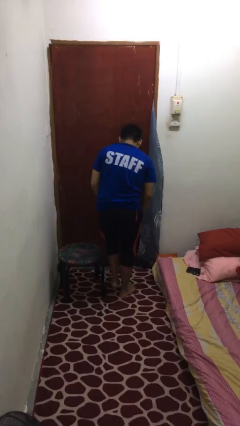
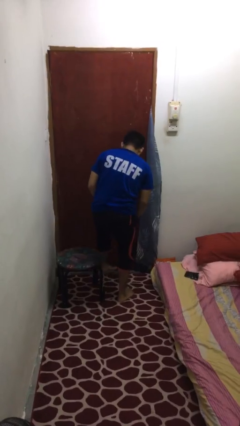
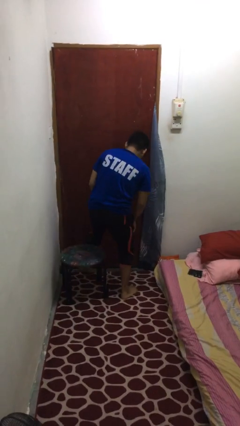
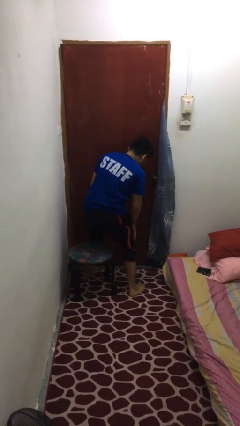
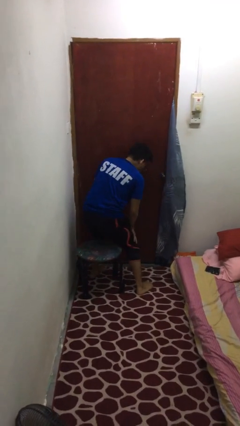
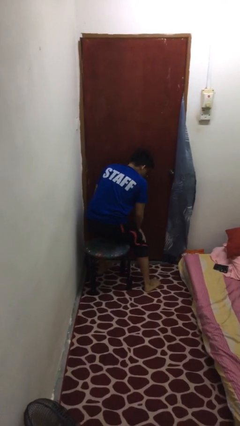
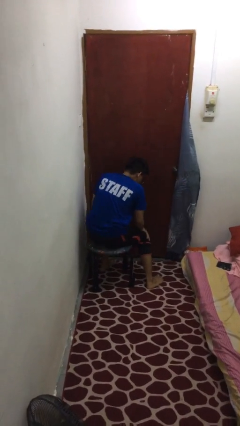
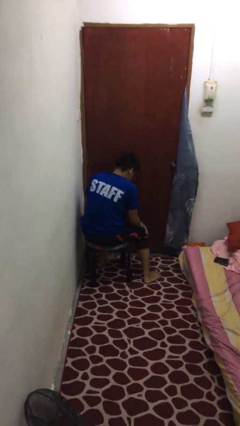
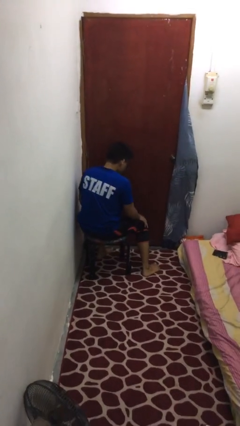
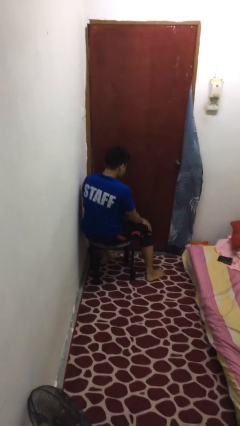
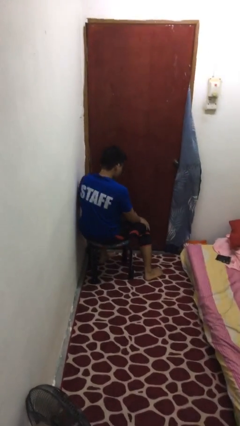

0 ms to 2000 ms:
person sits down

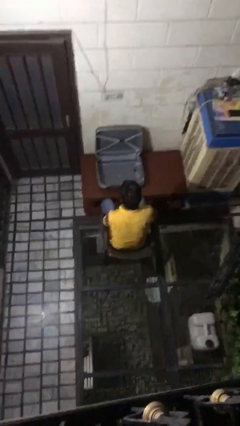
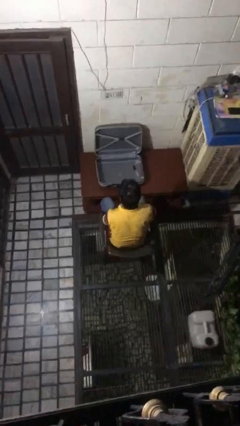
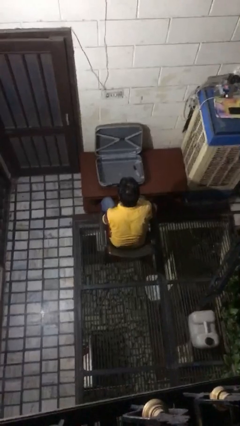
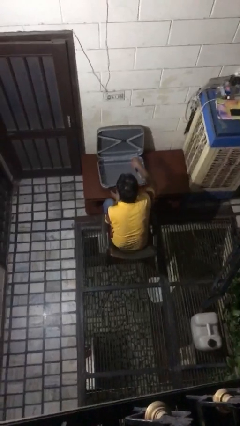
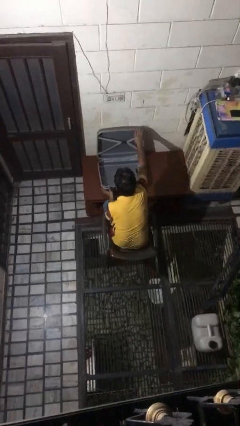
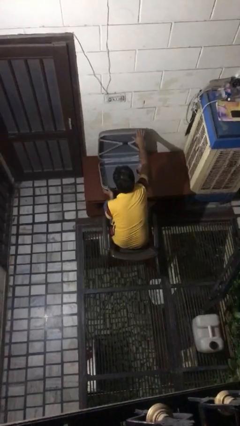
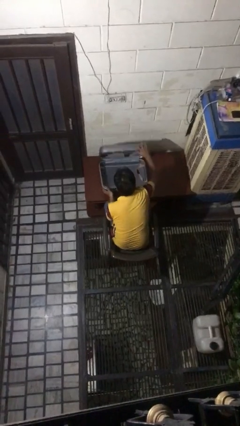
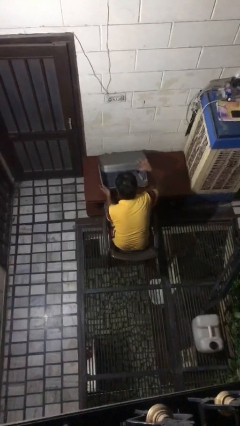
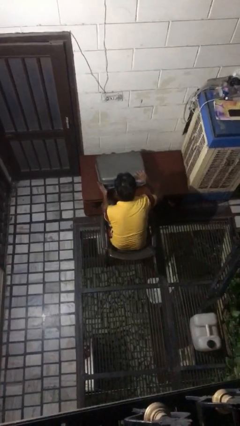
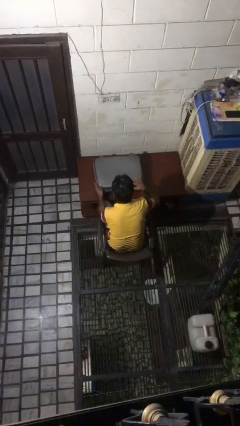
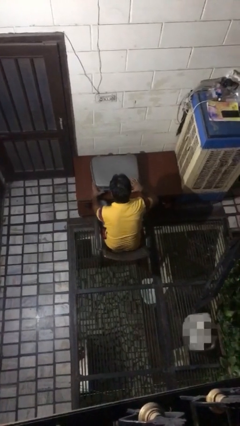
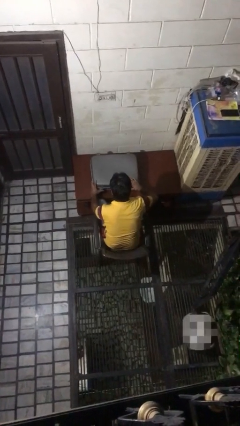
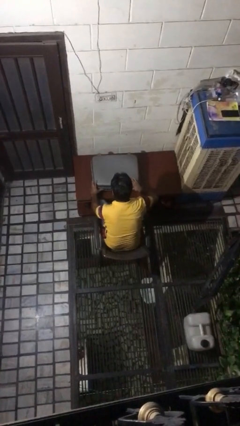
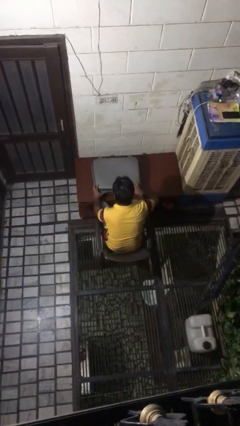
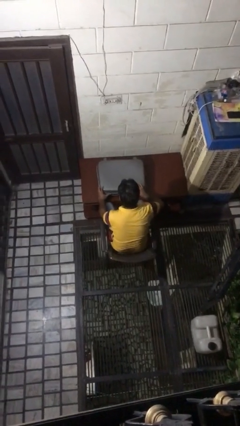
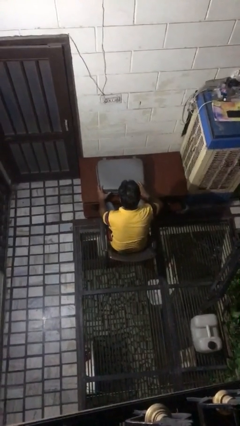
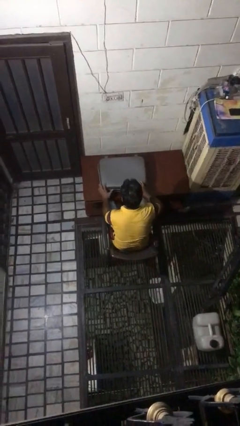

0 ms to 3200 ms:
person closes suitcase

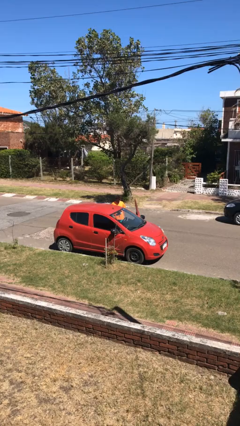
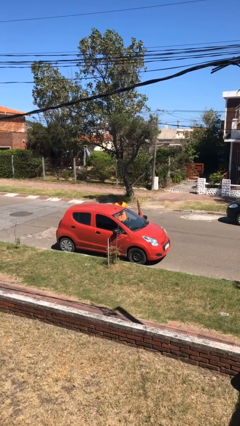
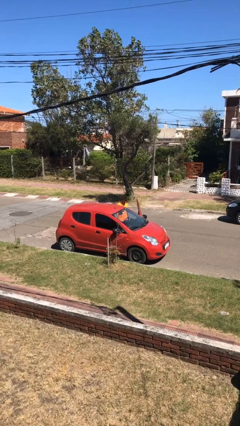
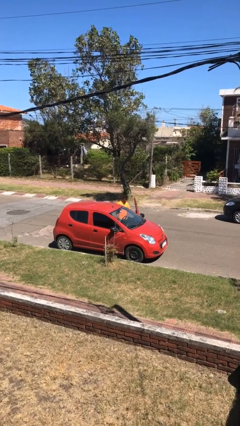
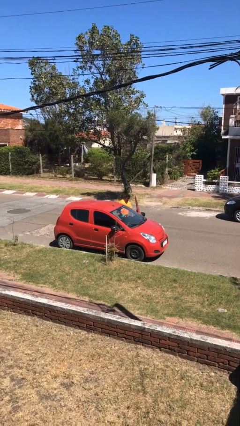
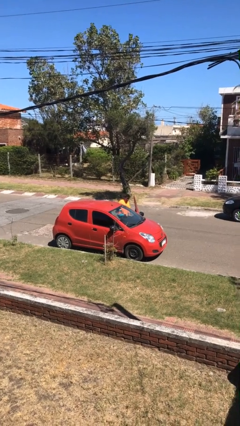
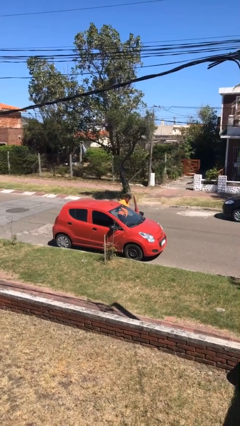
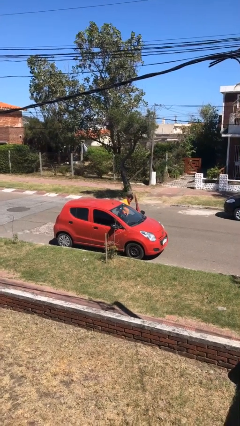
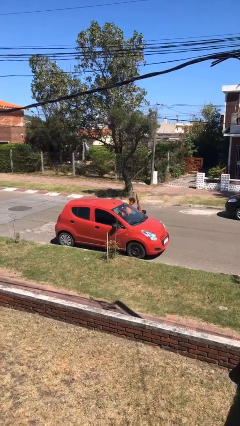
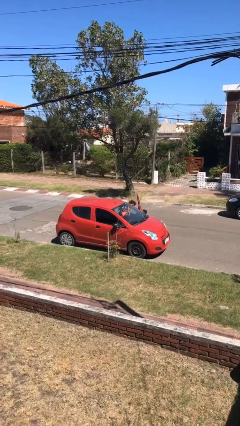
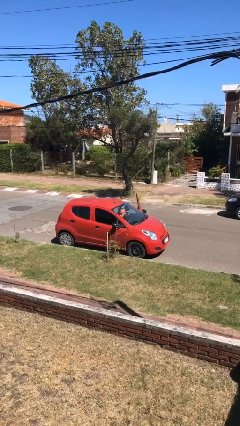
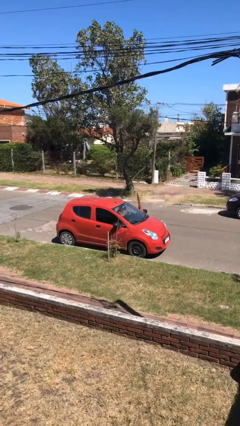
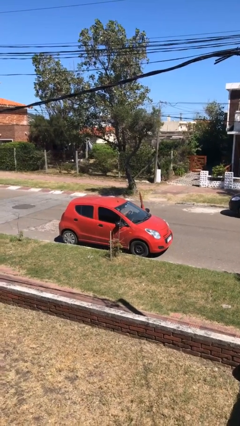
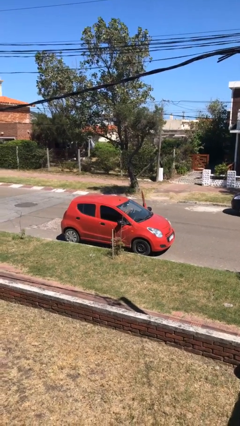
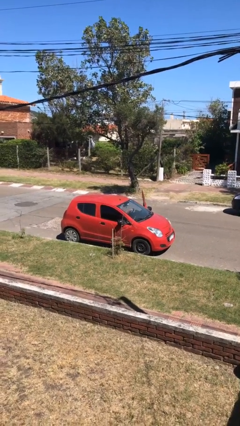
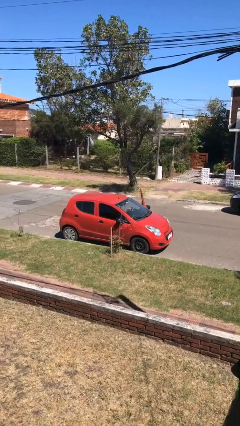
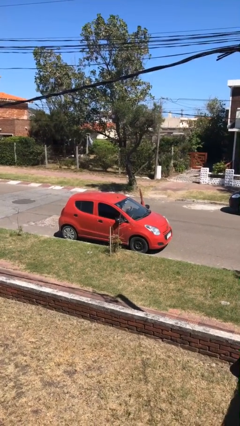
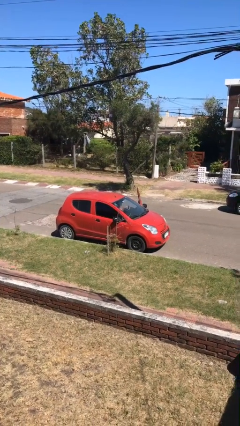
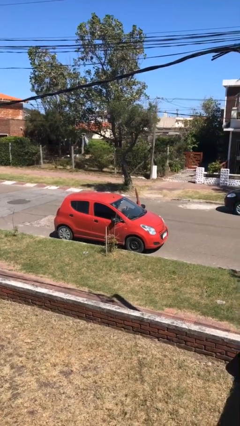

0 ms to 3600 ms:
person enters car

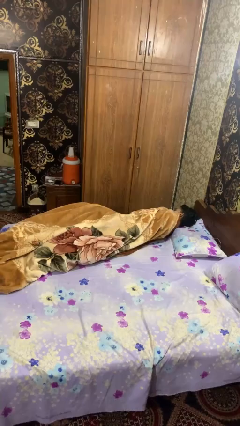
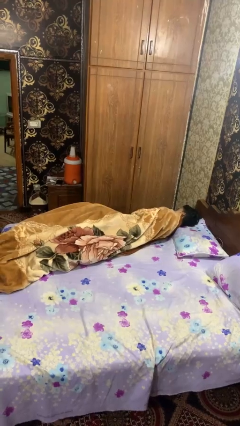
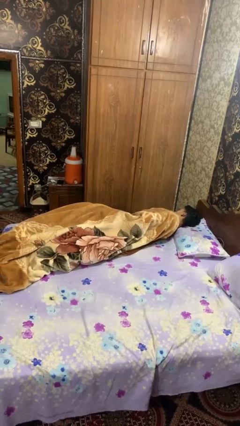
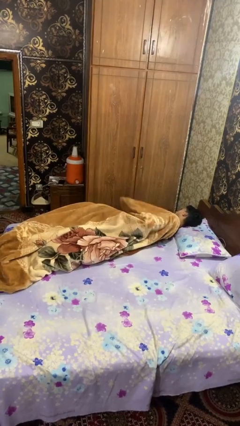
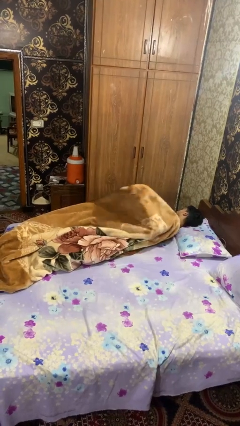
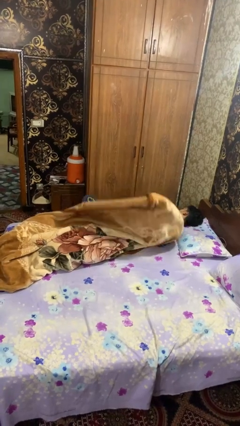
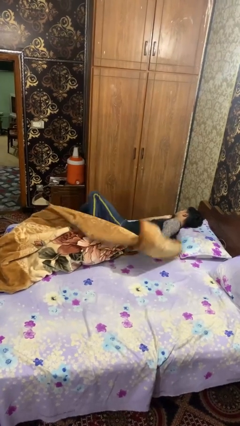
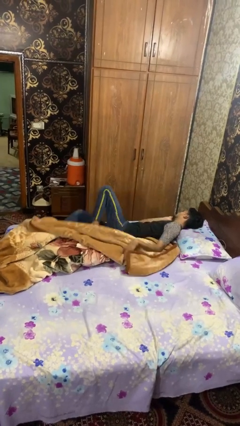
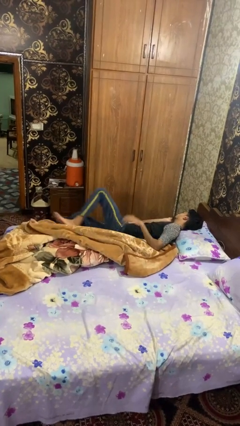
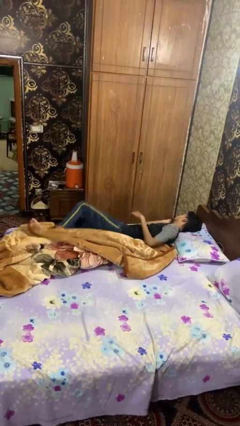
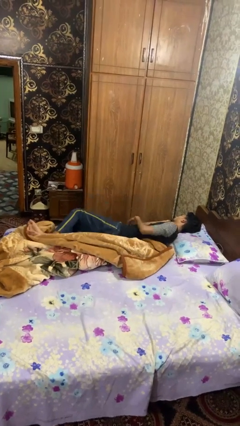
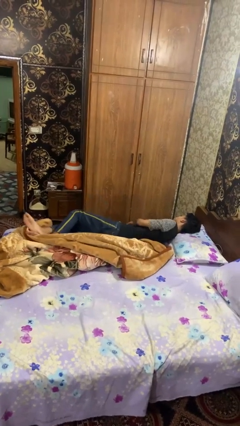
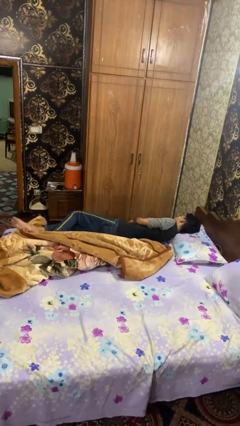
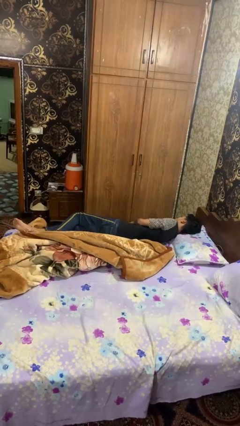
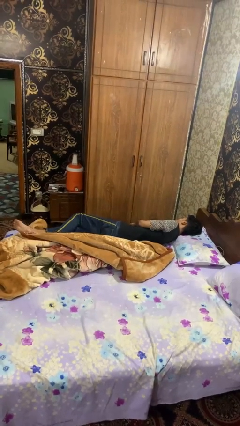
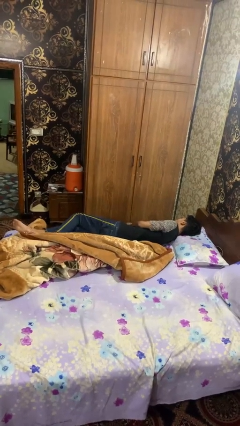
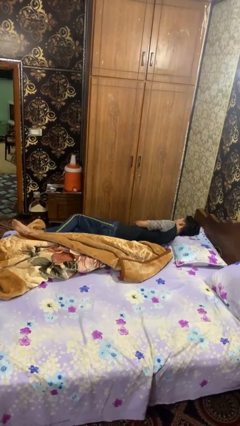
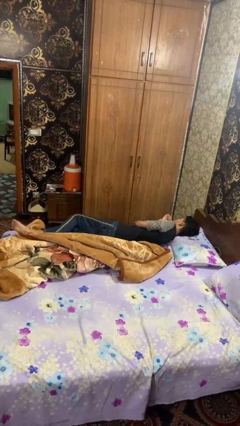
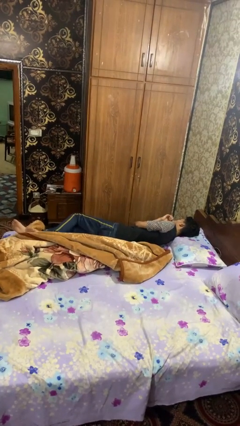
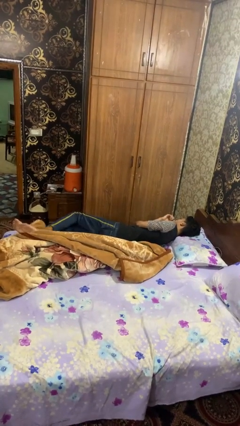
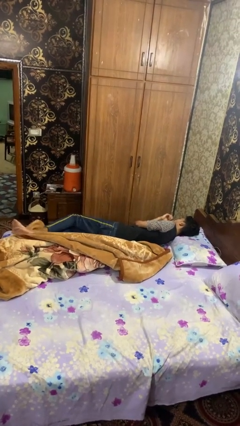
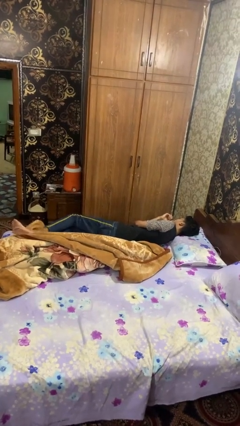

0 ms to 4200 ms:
person uncovers with blanket

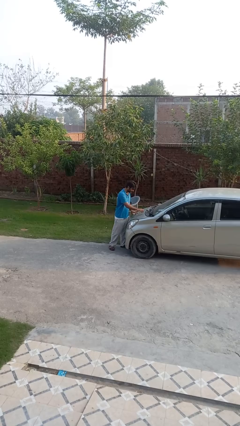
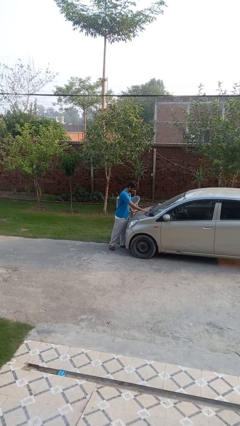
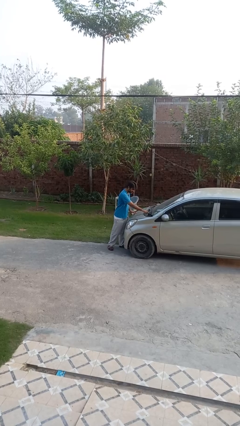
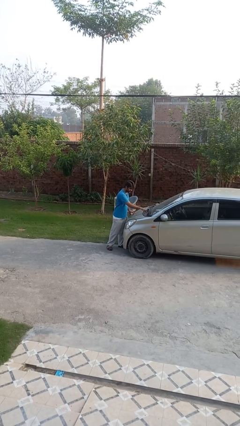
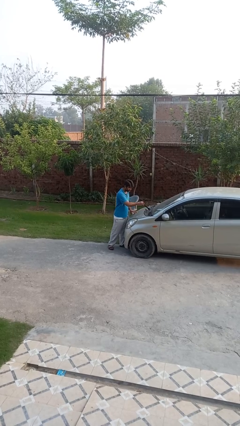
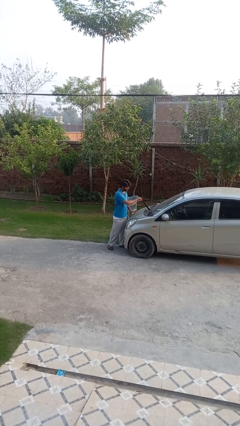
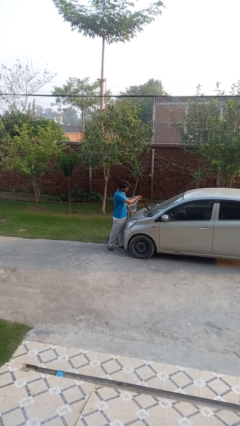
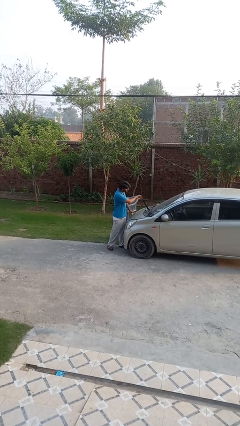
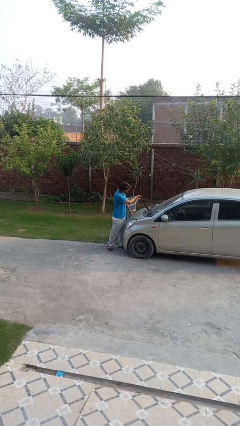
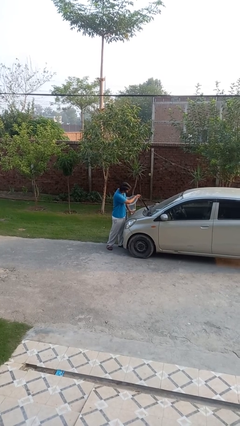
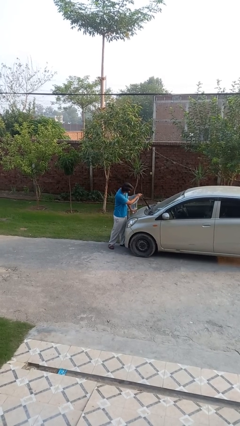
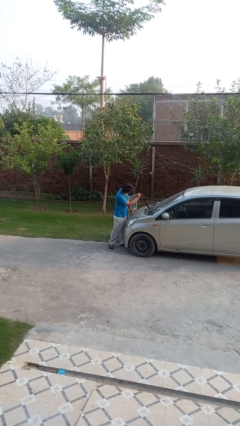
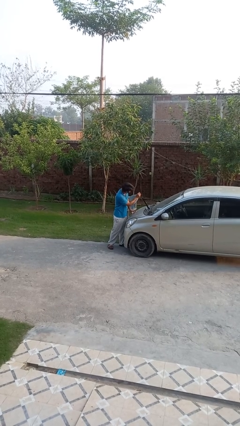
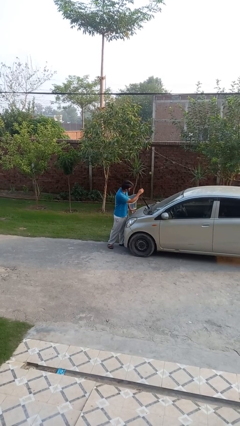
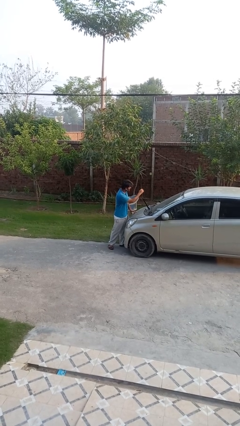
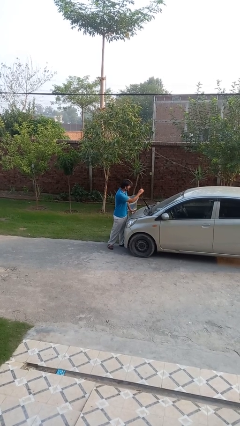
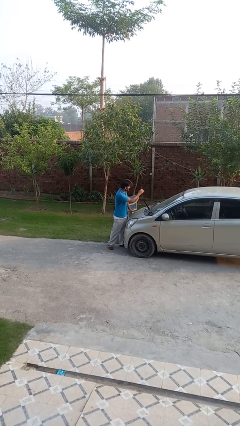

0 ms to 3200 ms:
person flips up car wipers

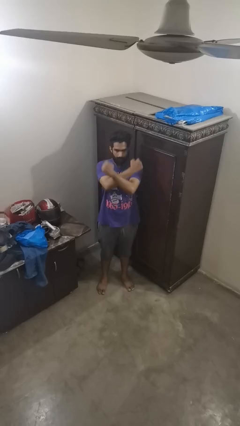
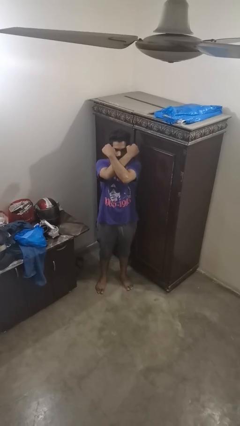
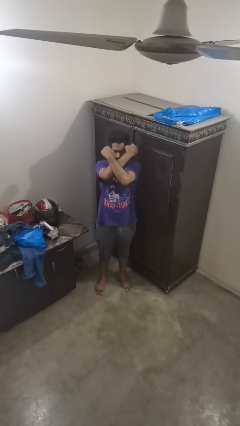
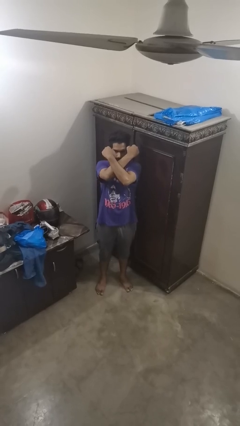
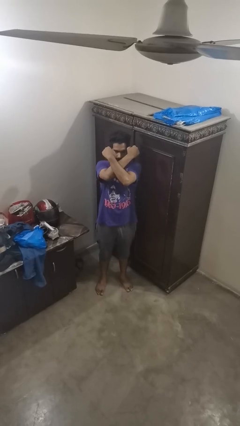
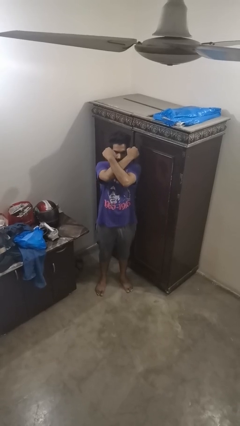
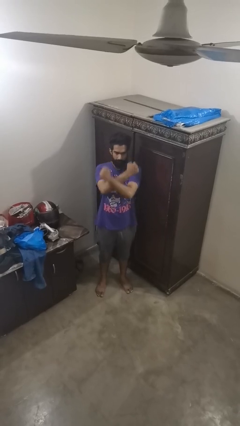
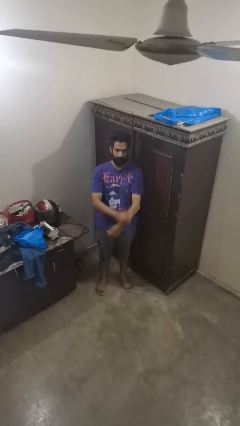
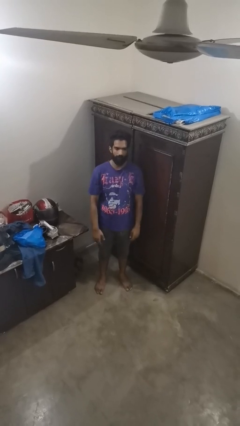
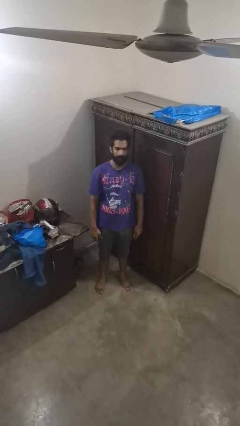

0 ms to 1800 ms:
person gestures arms x
